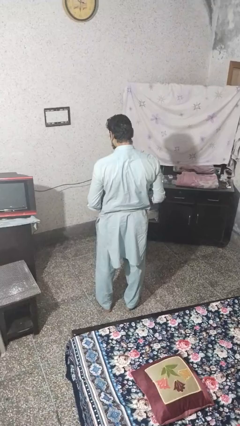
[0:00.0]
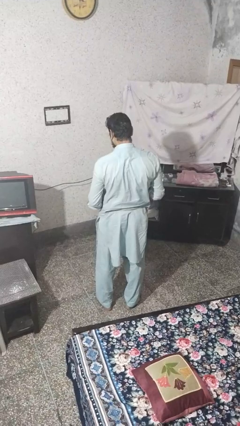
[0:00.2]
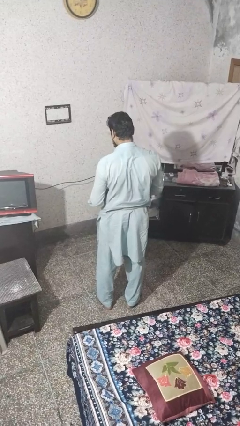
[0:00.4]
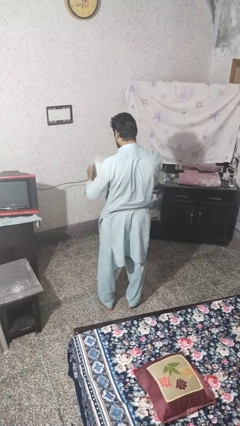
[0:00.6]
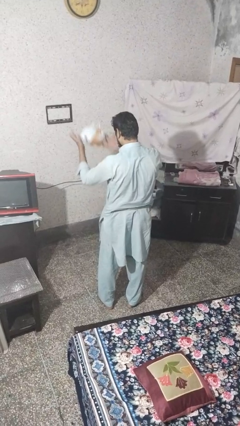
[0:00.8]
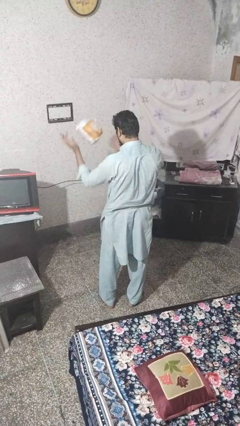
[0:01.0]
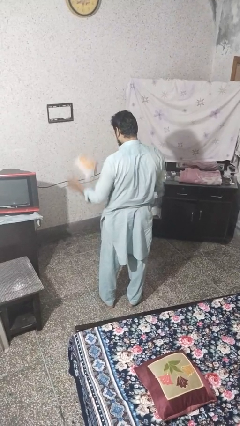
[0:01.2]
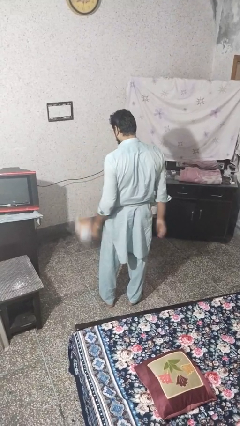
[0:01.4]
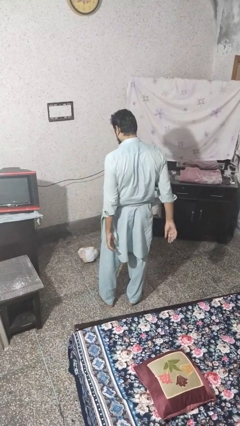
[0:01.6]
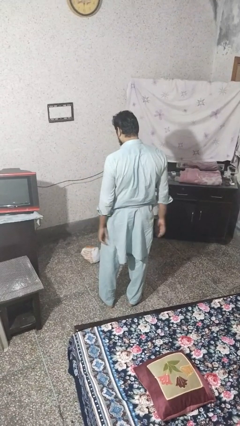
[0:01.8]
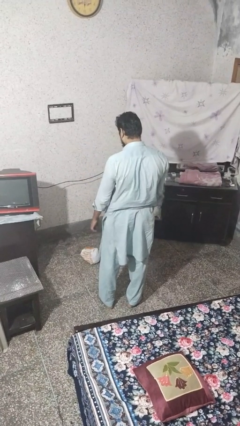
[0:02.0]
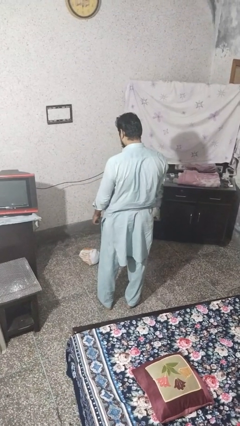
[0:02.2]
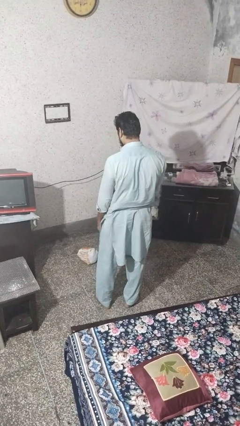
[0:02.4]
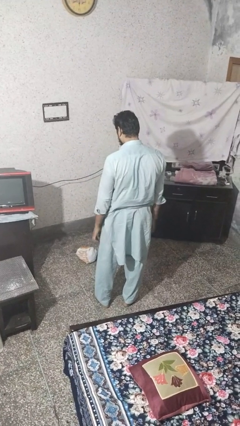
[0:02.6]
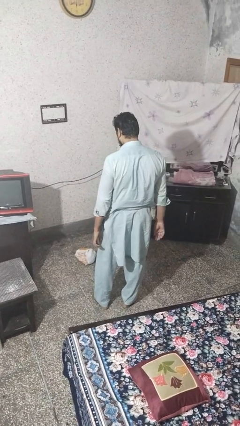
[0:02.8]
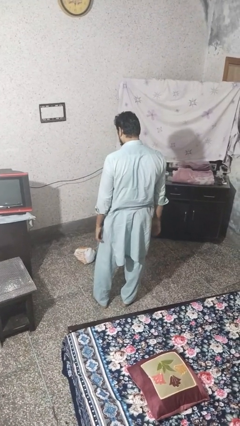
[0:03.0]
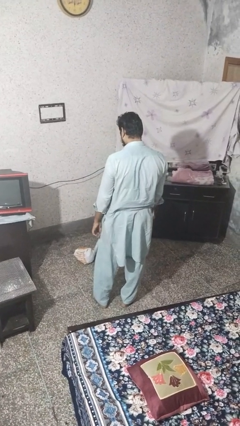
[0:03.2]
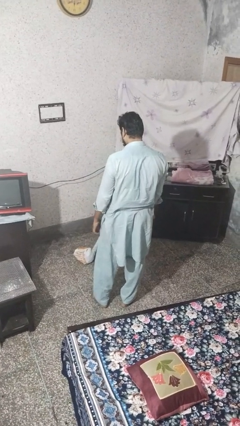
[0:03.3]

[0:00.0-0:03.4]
person throws object to ground

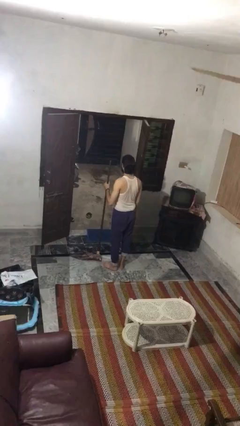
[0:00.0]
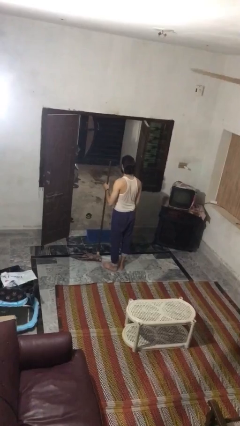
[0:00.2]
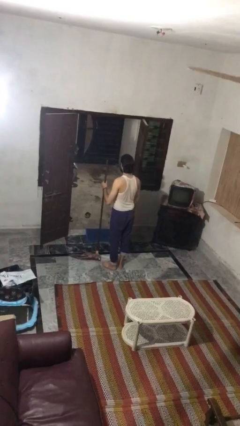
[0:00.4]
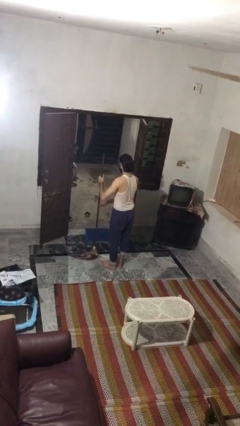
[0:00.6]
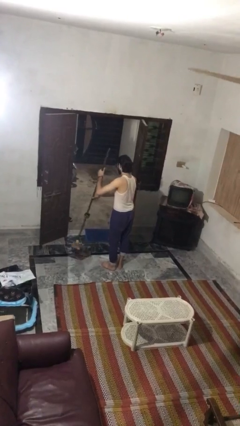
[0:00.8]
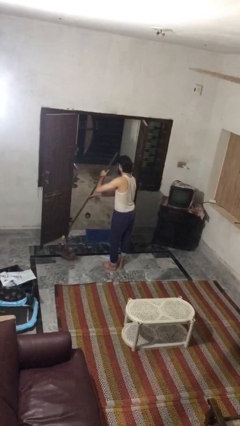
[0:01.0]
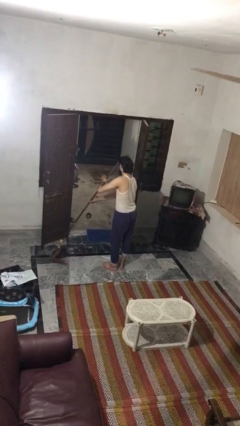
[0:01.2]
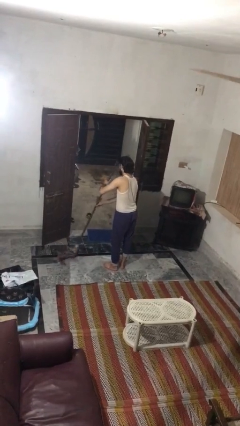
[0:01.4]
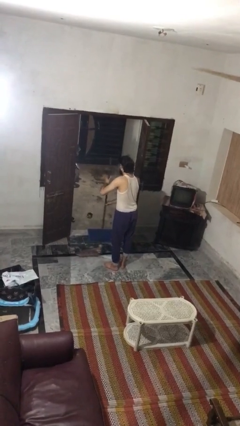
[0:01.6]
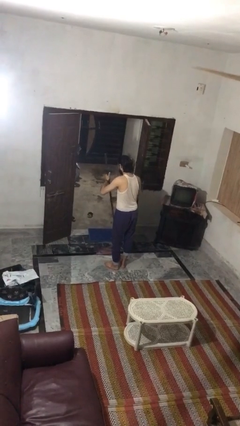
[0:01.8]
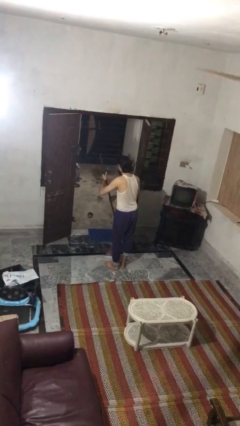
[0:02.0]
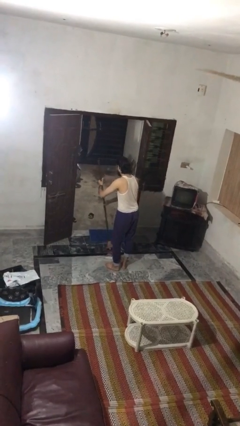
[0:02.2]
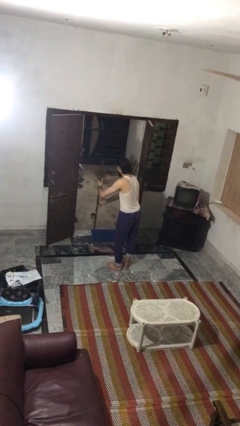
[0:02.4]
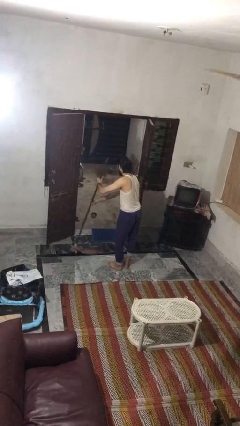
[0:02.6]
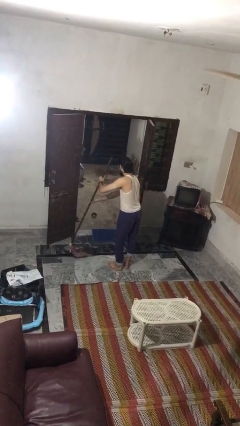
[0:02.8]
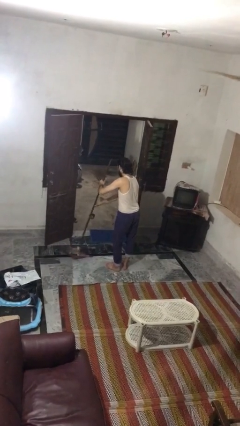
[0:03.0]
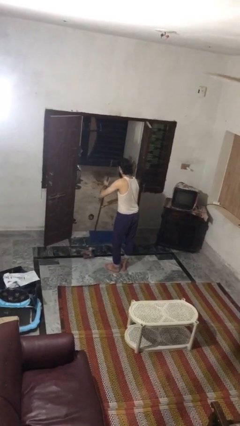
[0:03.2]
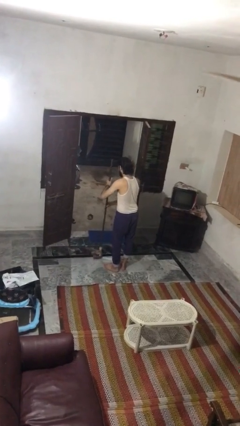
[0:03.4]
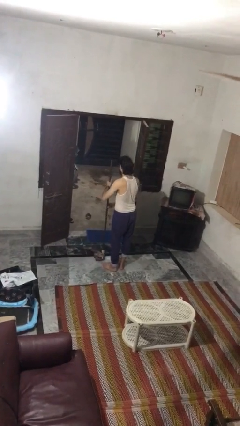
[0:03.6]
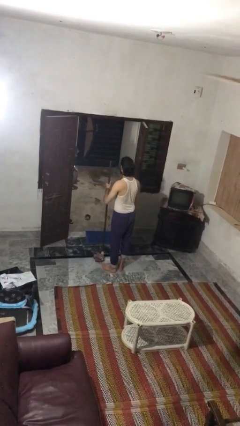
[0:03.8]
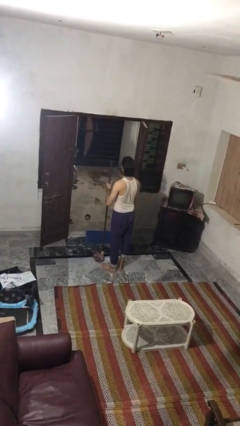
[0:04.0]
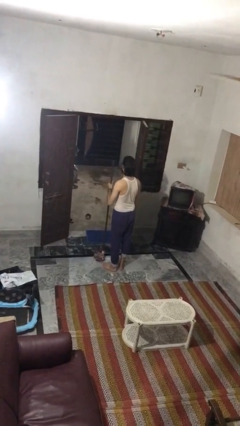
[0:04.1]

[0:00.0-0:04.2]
person mops

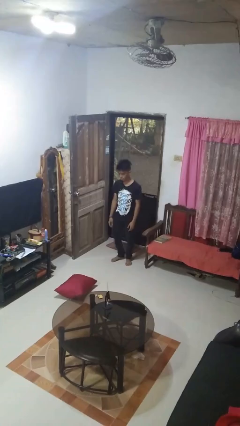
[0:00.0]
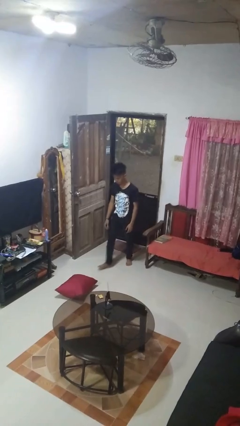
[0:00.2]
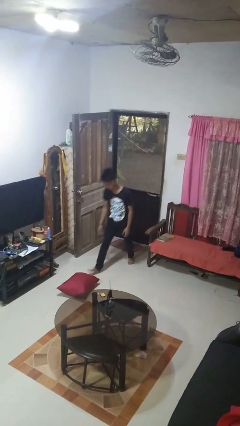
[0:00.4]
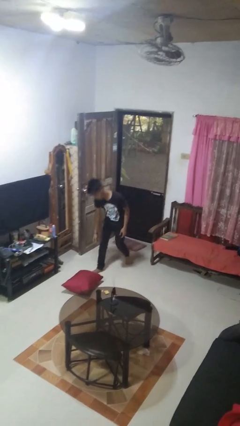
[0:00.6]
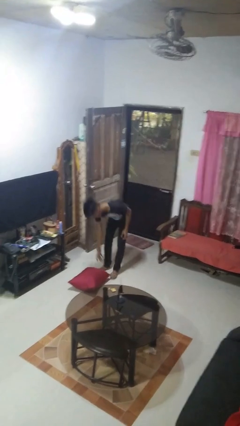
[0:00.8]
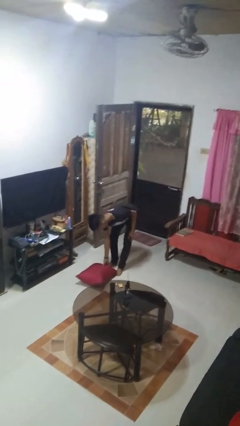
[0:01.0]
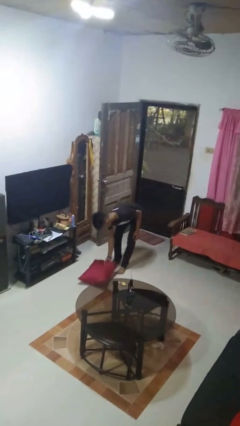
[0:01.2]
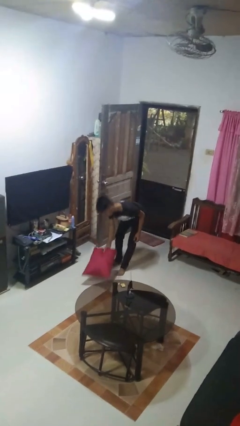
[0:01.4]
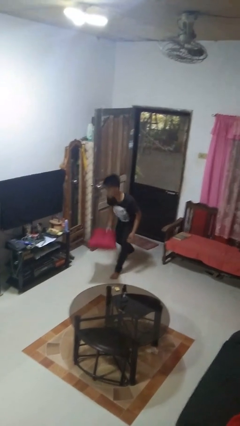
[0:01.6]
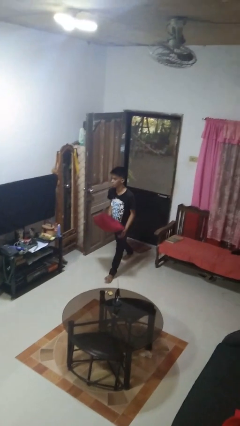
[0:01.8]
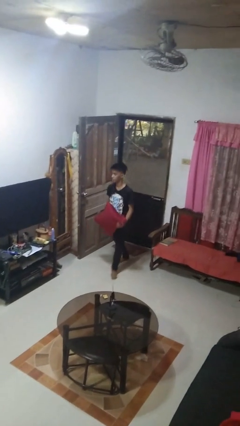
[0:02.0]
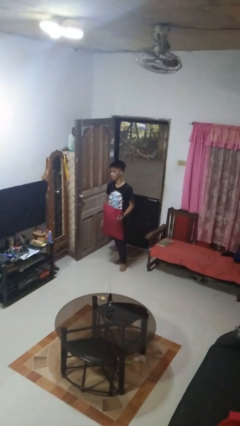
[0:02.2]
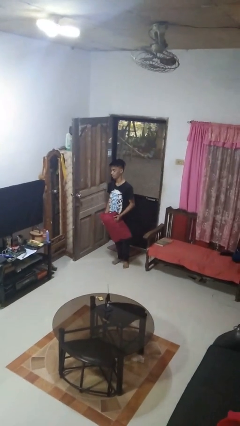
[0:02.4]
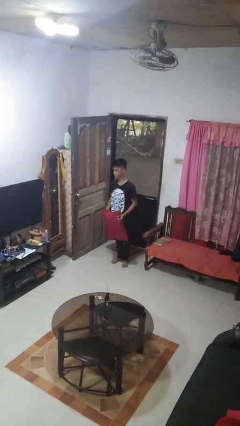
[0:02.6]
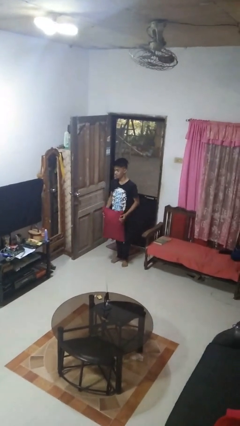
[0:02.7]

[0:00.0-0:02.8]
person picks up object from floor

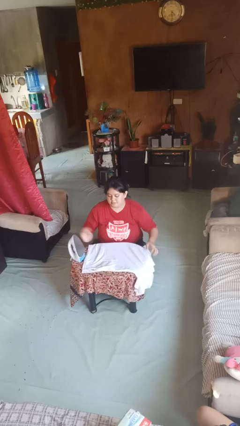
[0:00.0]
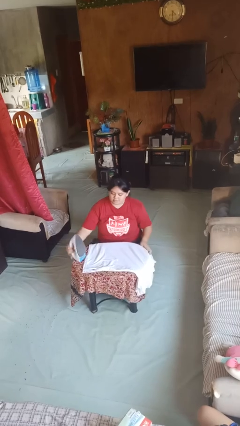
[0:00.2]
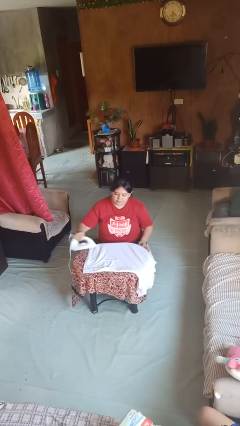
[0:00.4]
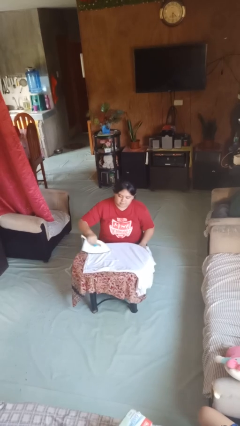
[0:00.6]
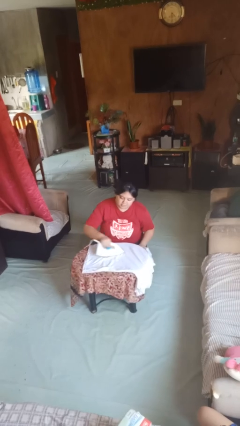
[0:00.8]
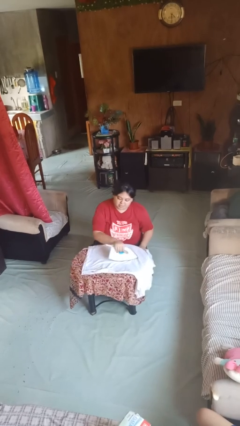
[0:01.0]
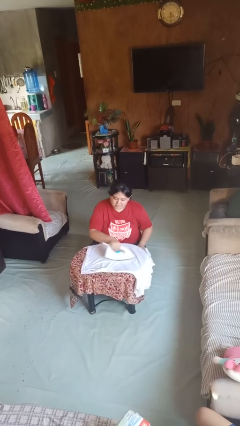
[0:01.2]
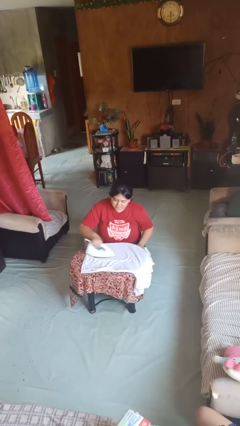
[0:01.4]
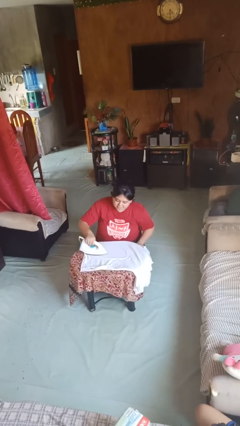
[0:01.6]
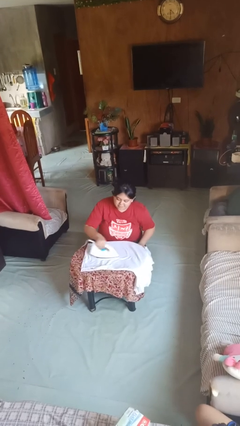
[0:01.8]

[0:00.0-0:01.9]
person irons clothes

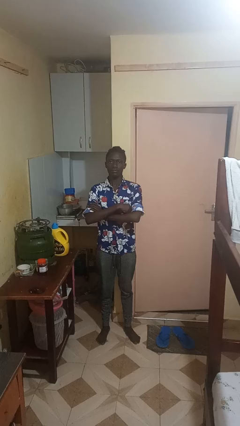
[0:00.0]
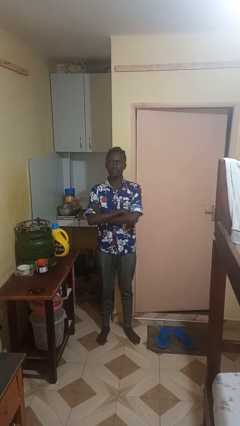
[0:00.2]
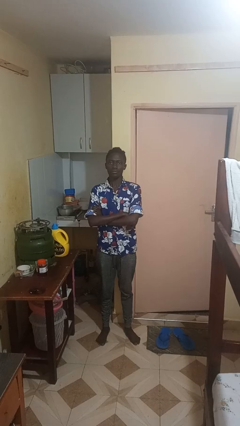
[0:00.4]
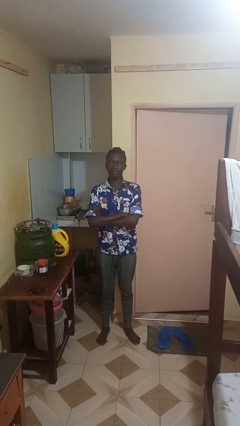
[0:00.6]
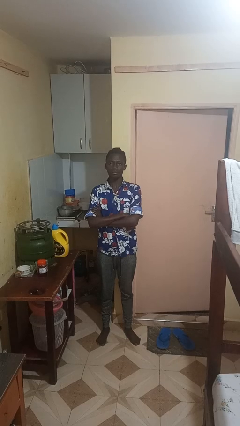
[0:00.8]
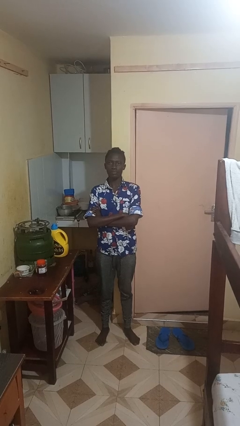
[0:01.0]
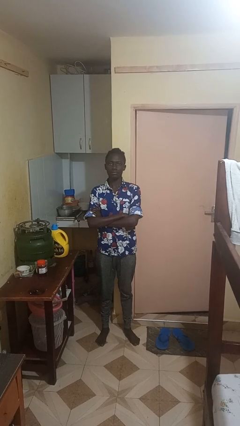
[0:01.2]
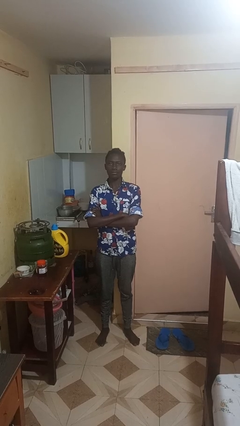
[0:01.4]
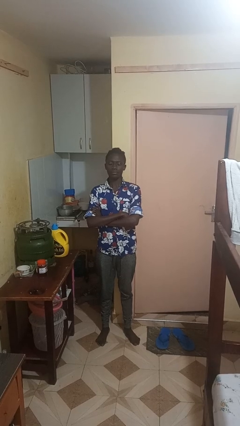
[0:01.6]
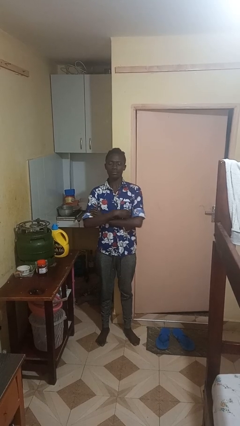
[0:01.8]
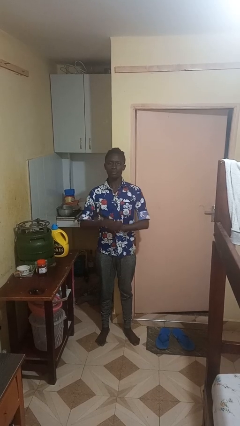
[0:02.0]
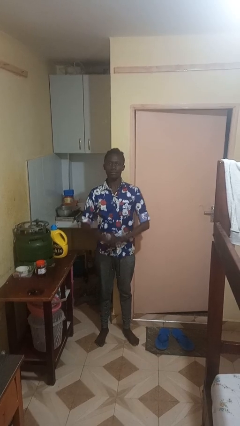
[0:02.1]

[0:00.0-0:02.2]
person crosses arms

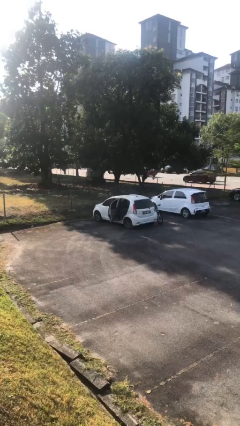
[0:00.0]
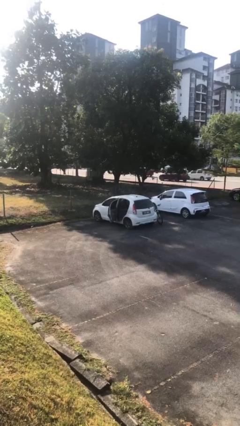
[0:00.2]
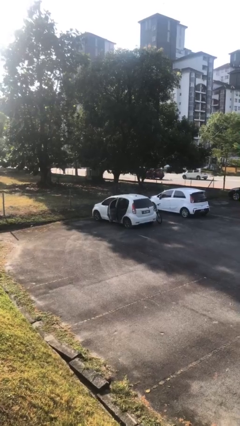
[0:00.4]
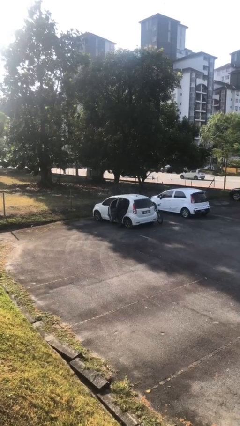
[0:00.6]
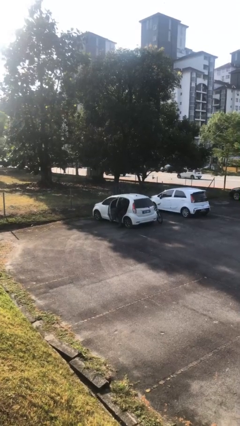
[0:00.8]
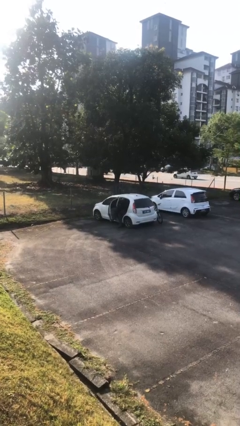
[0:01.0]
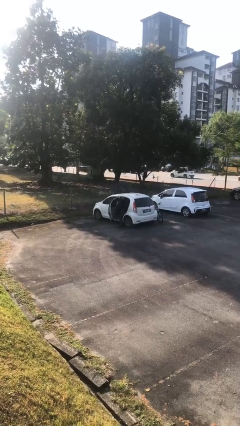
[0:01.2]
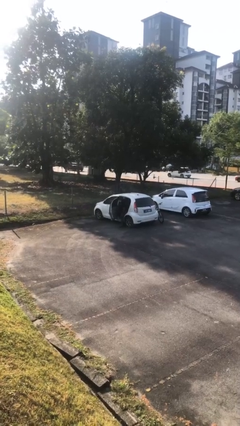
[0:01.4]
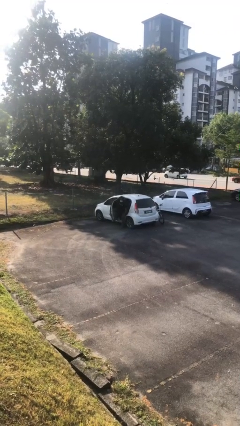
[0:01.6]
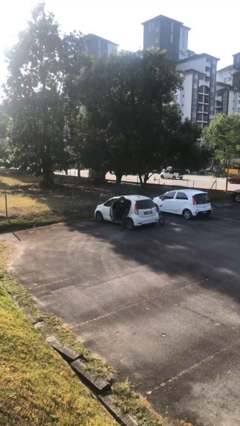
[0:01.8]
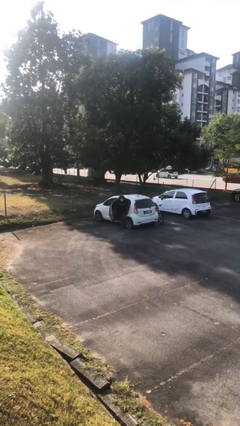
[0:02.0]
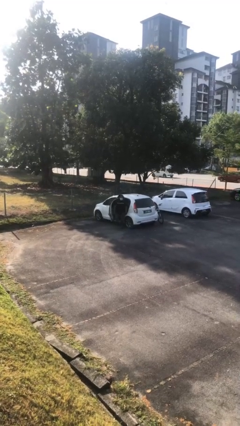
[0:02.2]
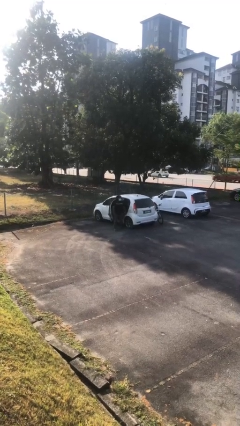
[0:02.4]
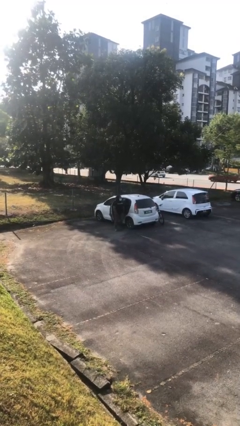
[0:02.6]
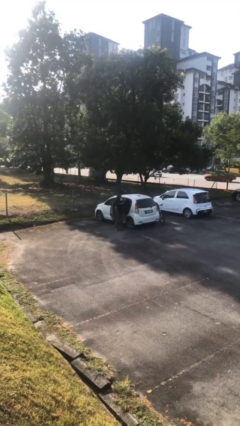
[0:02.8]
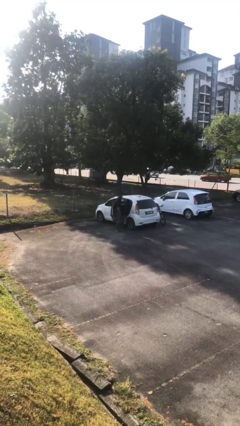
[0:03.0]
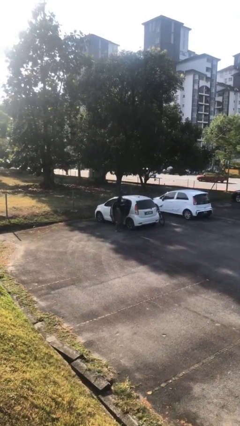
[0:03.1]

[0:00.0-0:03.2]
person exits car
